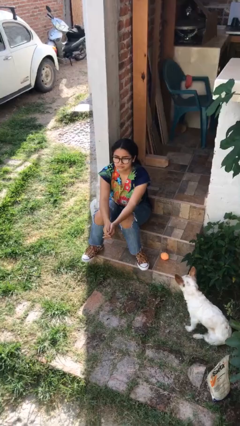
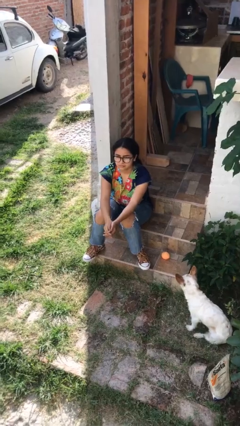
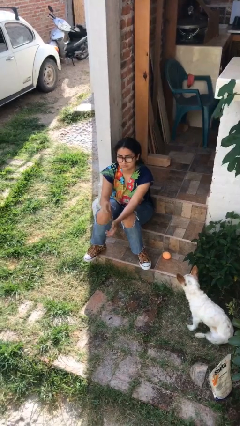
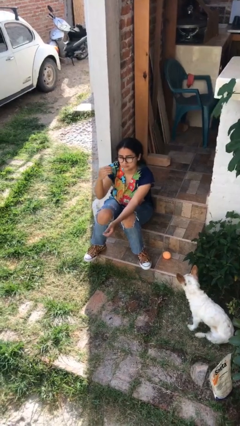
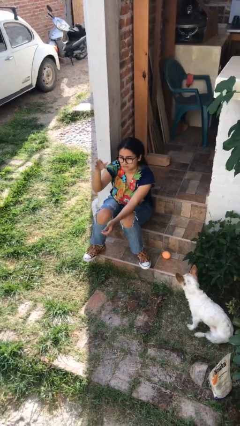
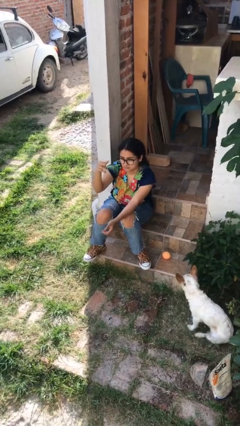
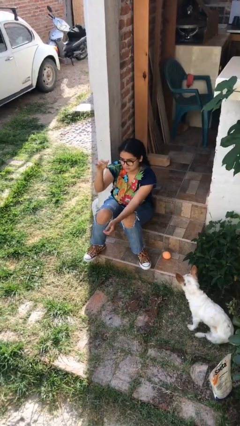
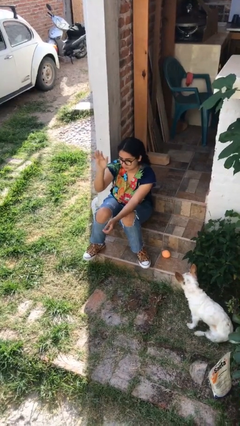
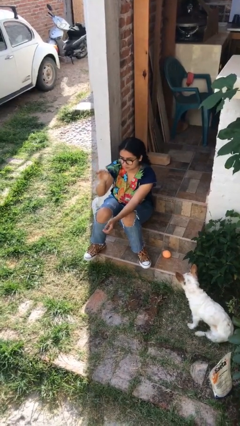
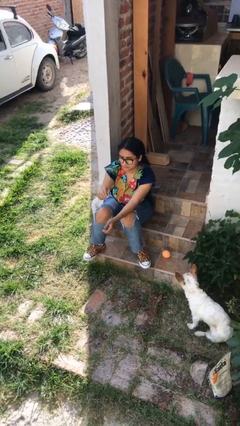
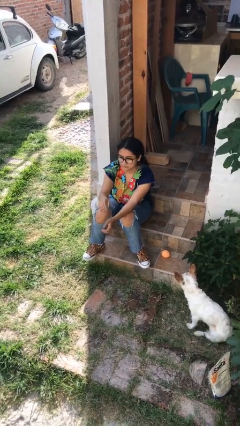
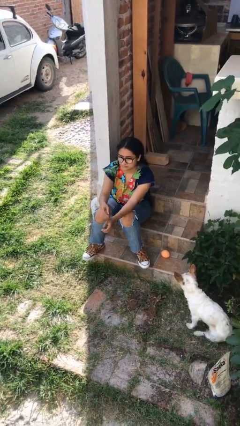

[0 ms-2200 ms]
person gestures come here

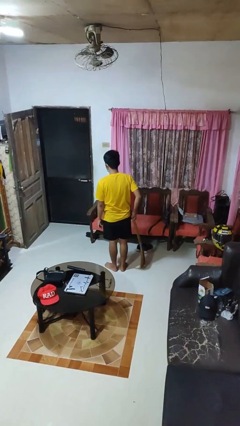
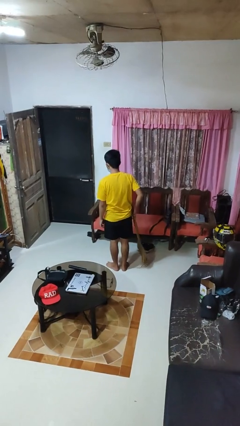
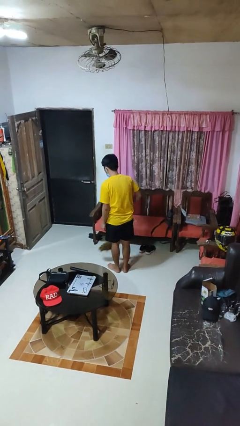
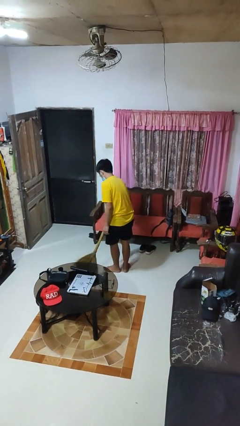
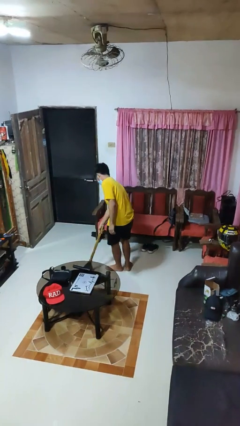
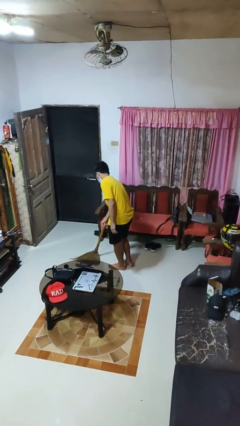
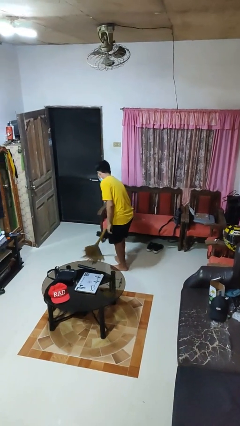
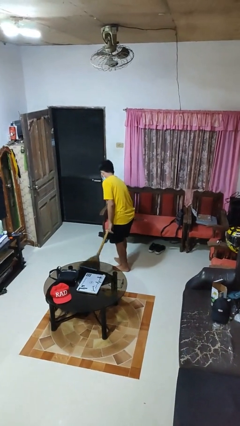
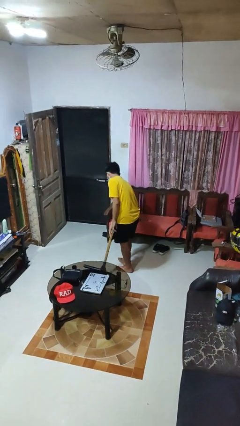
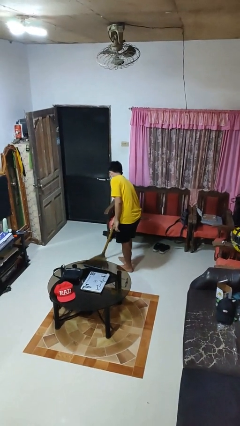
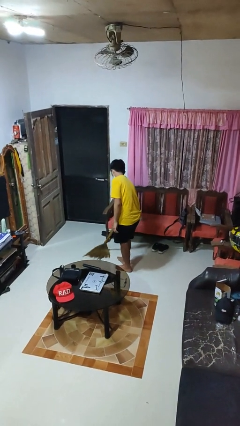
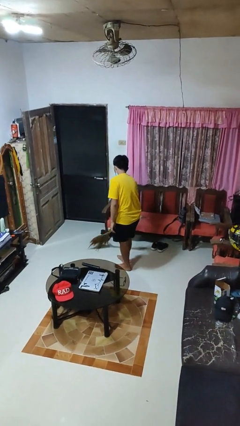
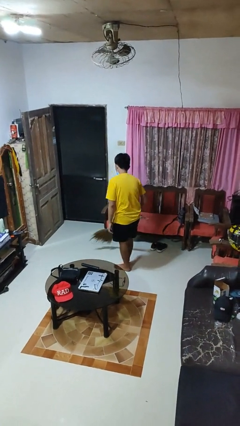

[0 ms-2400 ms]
person sweeps floor

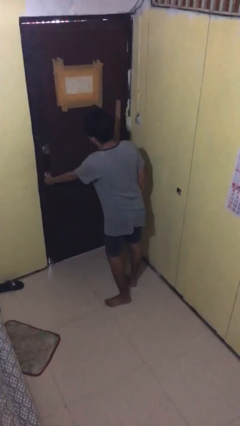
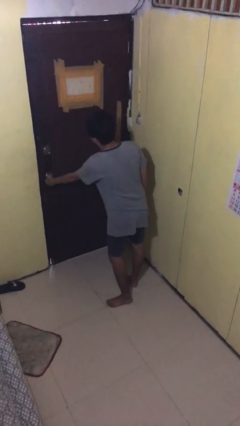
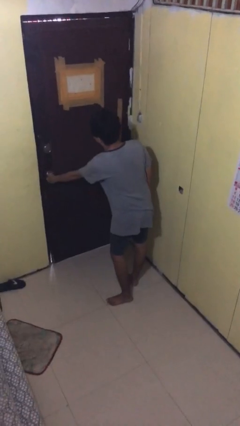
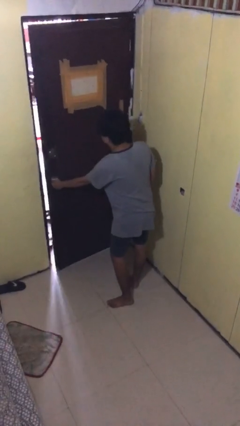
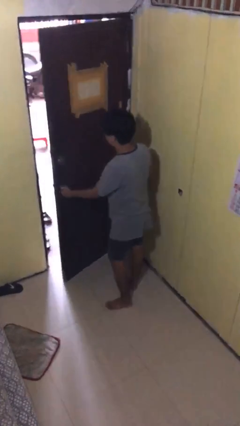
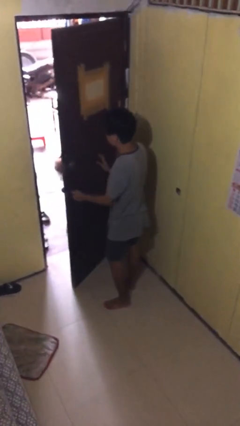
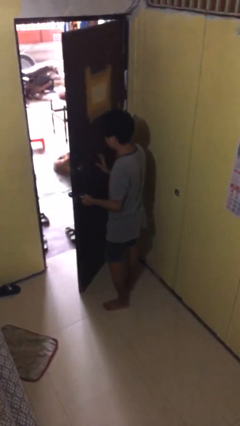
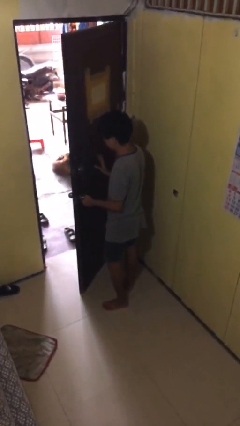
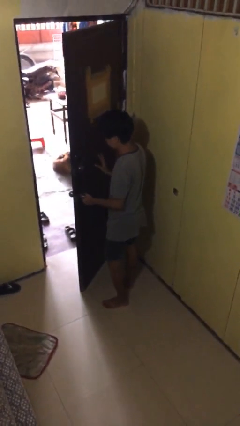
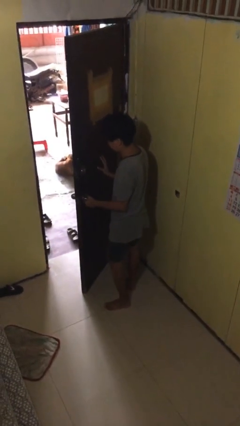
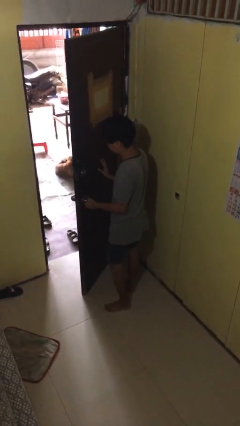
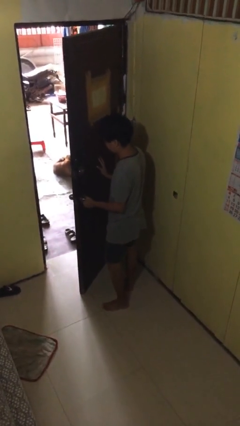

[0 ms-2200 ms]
person opens facility door

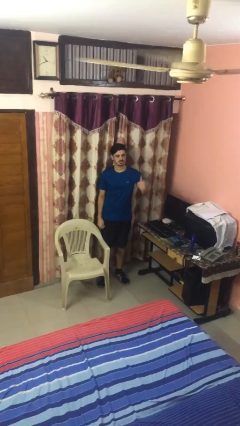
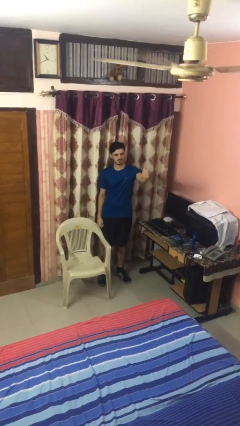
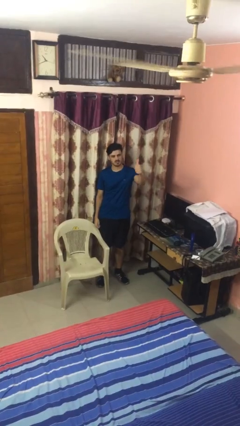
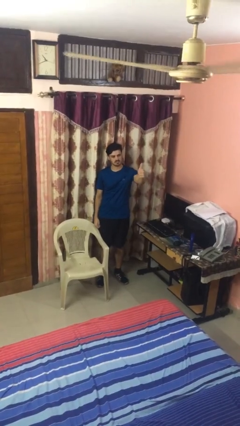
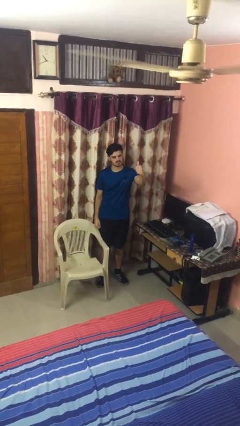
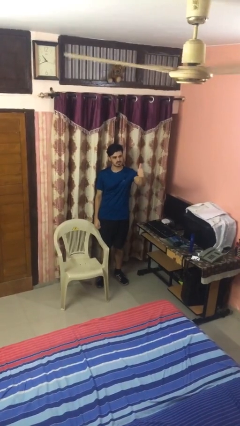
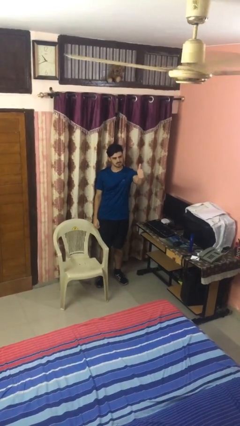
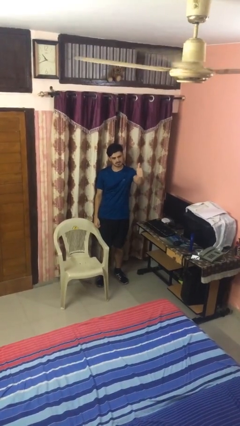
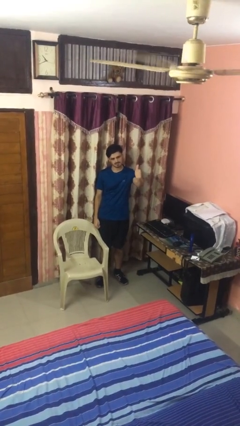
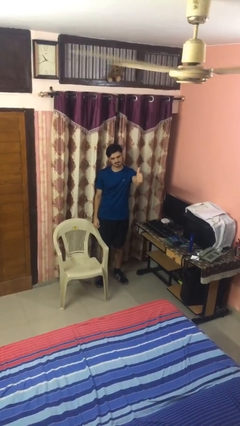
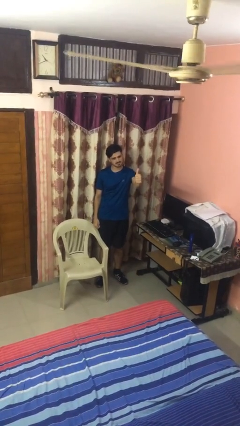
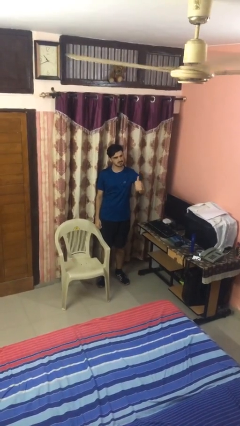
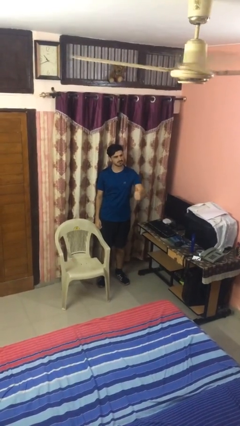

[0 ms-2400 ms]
person gestures thumbs up

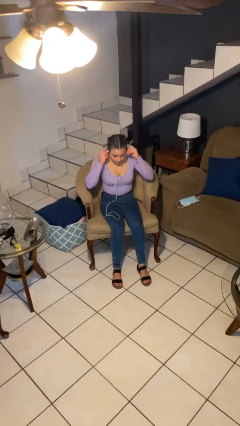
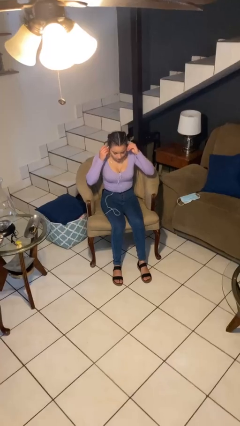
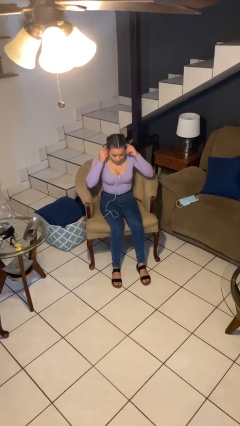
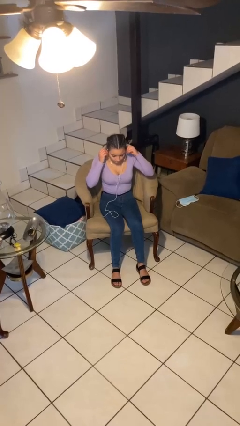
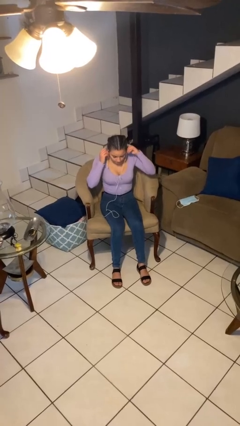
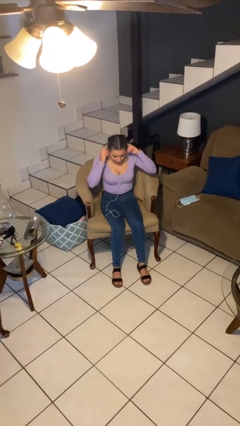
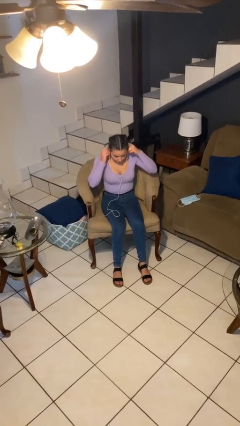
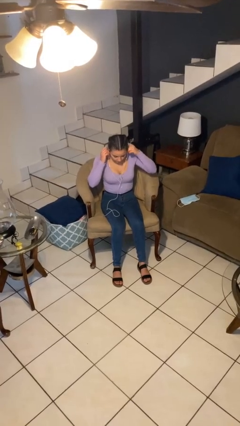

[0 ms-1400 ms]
person puts on headphones

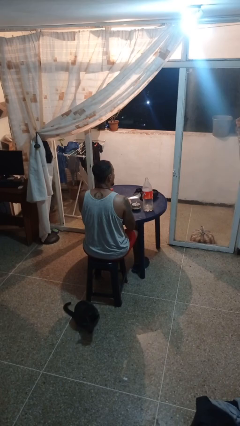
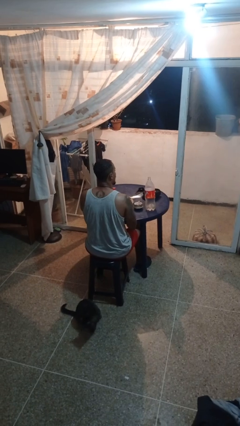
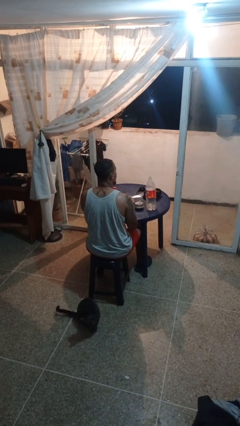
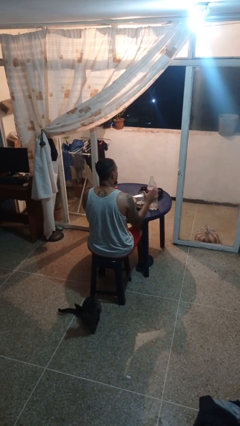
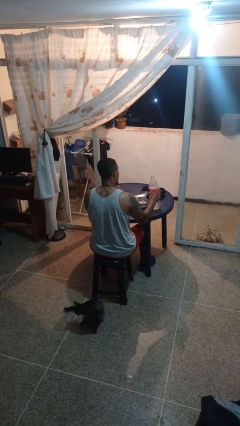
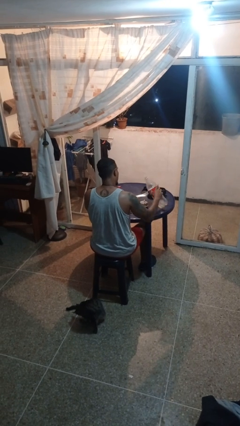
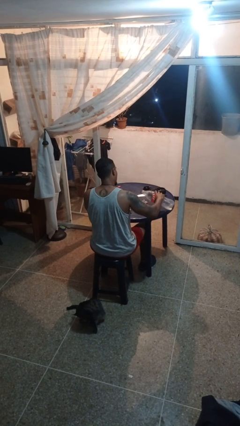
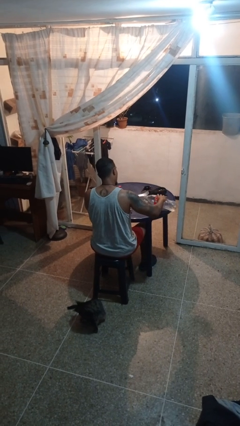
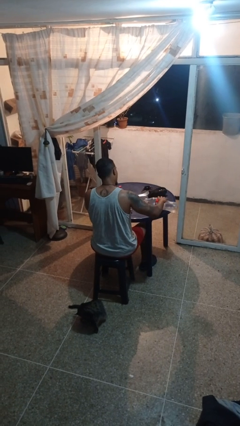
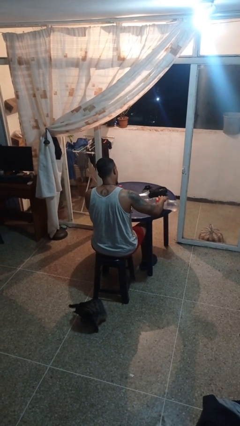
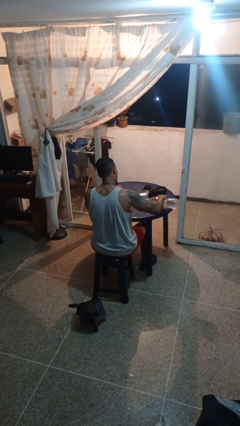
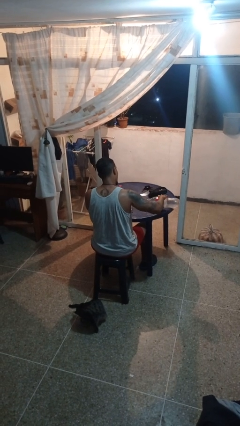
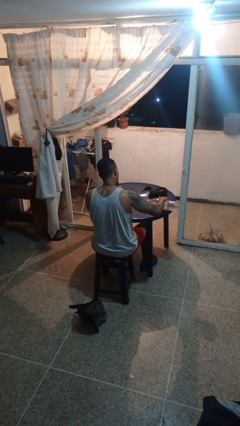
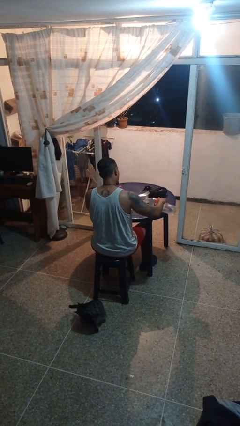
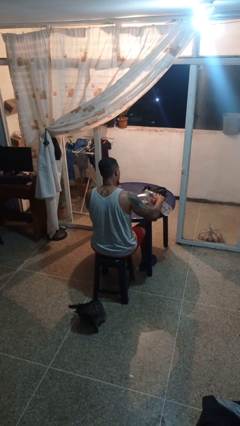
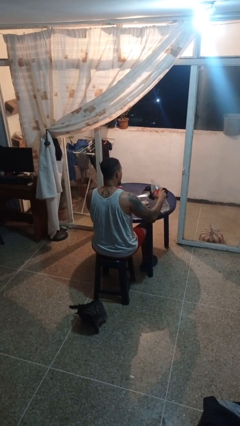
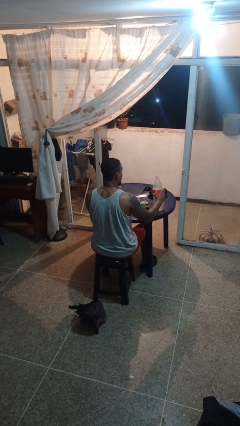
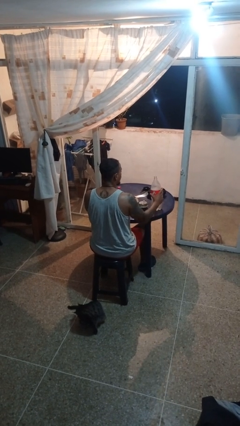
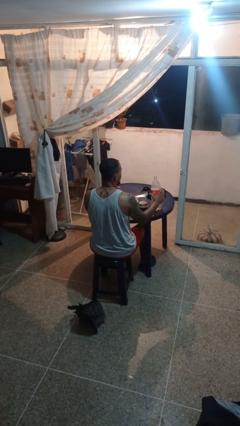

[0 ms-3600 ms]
person pours liquid into cup

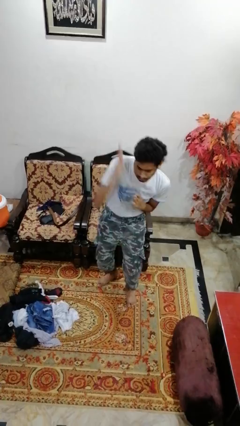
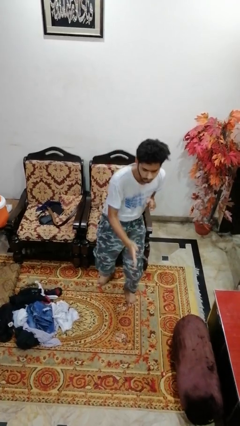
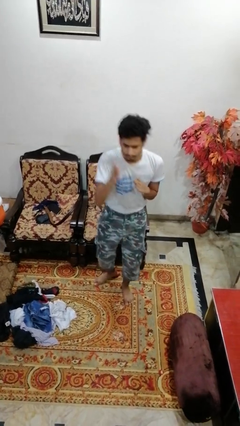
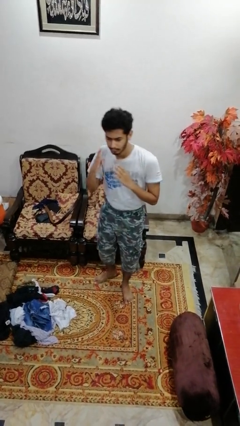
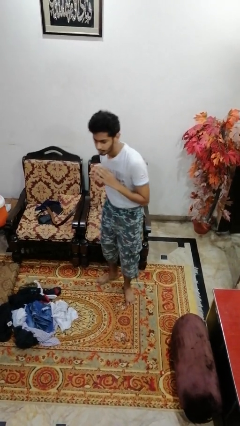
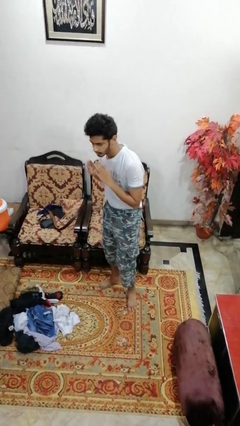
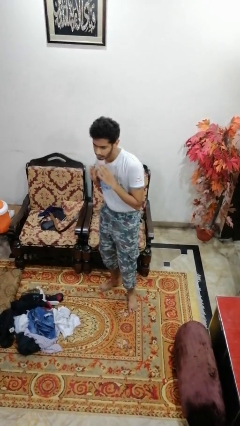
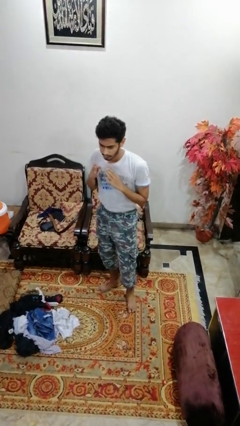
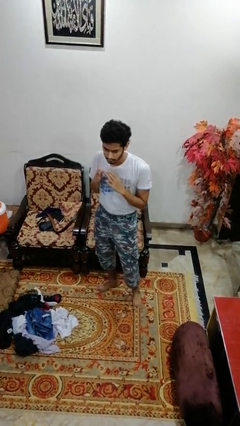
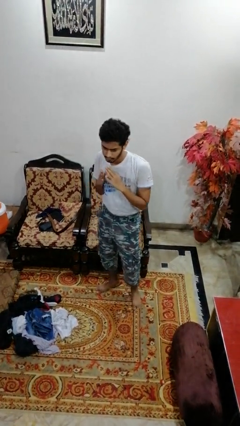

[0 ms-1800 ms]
person karate chop

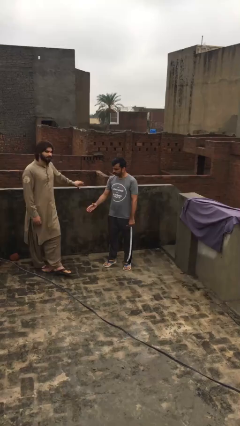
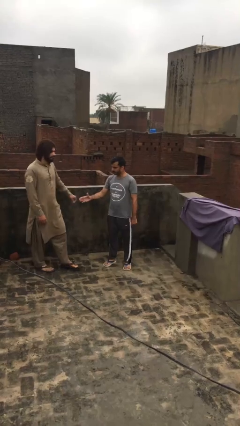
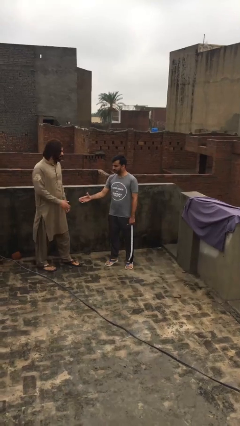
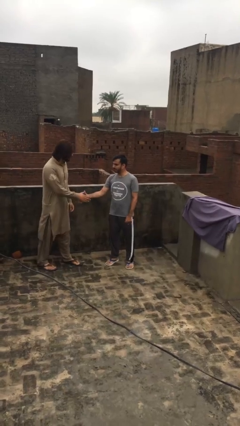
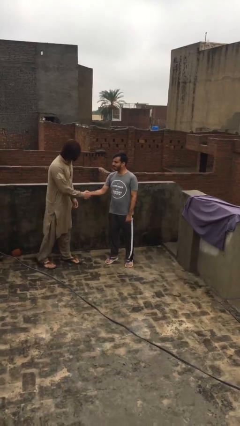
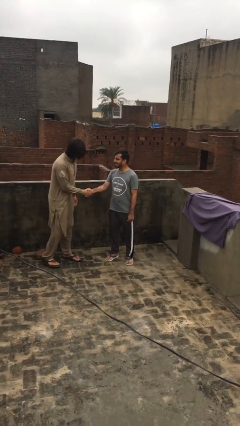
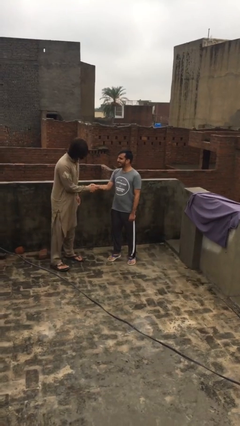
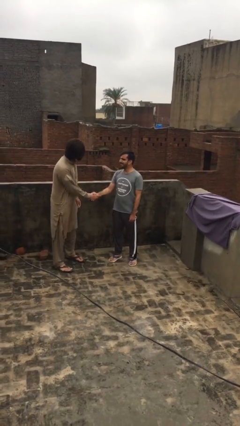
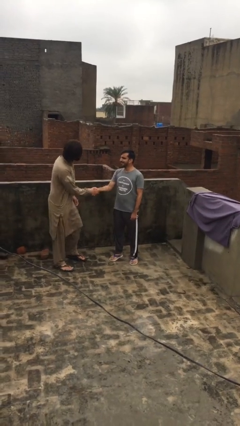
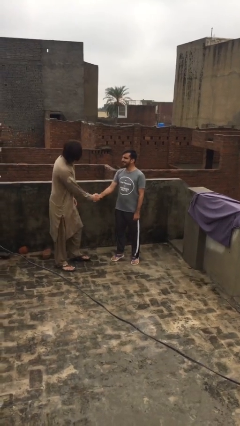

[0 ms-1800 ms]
person shakes hand
